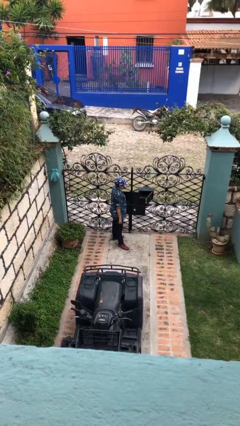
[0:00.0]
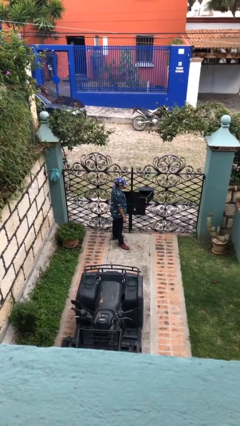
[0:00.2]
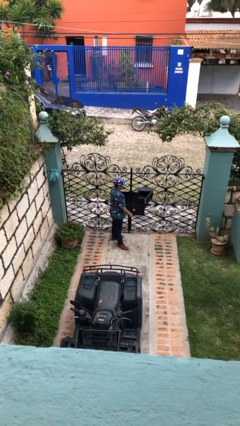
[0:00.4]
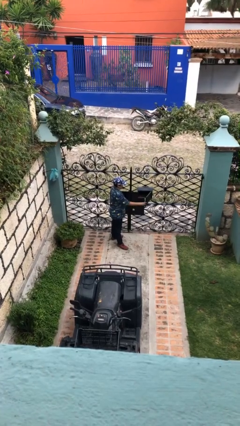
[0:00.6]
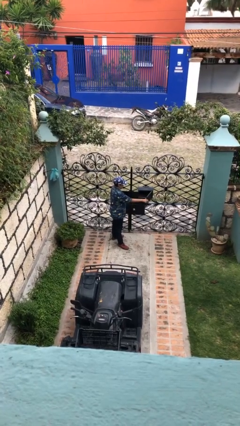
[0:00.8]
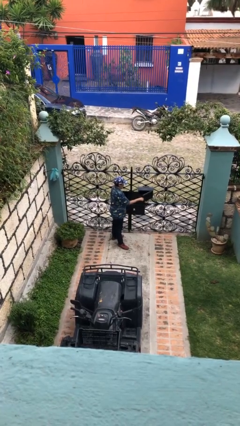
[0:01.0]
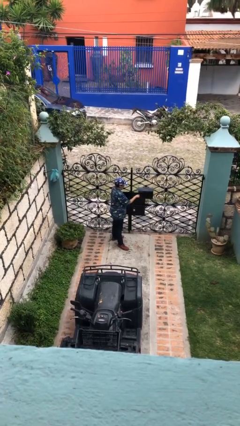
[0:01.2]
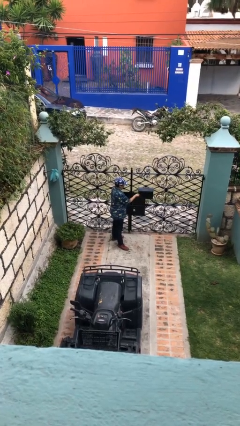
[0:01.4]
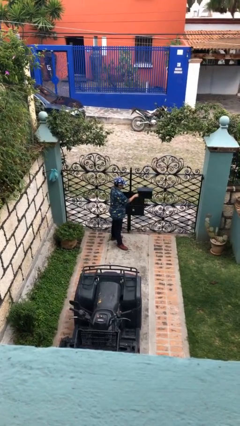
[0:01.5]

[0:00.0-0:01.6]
person closes mailbox

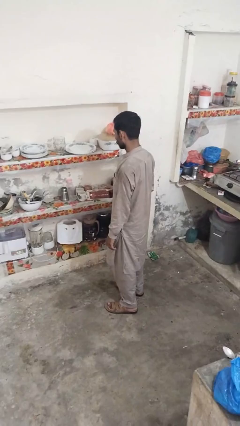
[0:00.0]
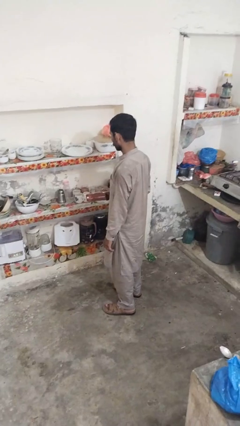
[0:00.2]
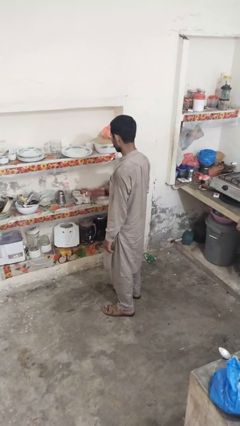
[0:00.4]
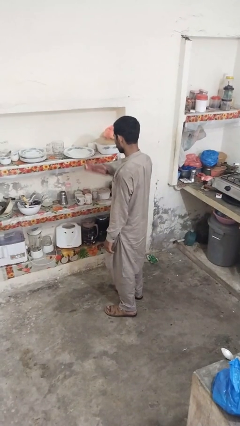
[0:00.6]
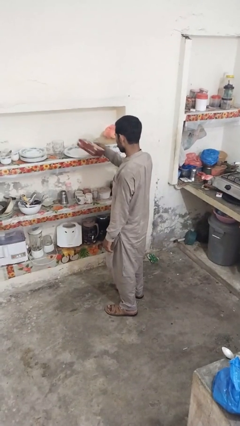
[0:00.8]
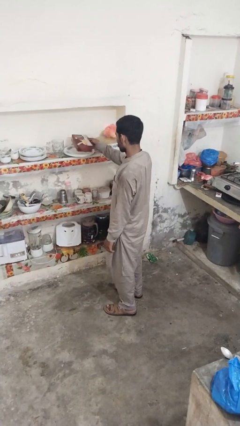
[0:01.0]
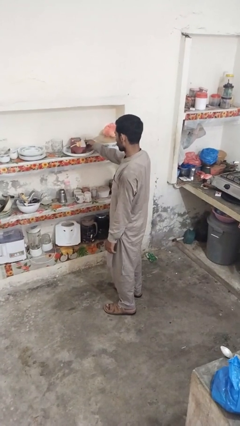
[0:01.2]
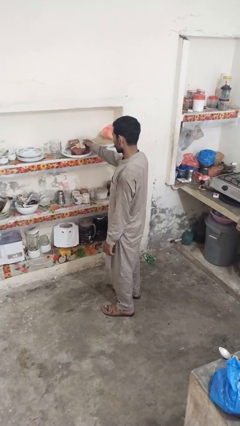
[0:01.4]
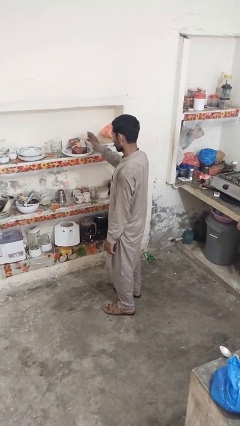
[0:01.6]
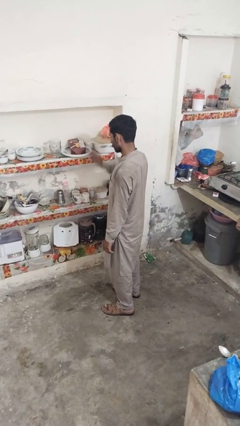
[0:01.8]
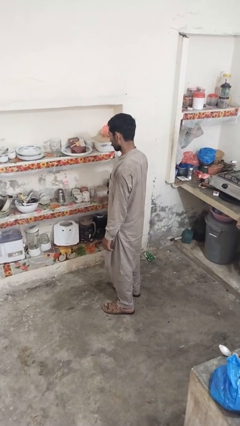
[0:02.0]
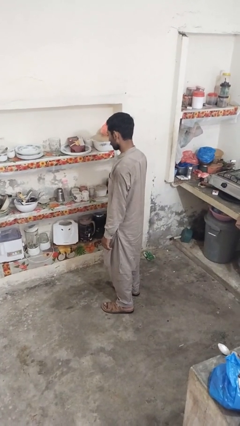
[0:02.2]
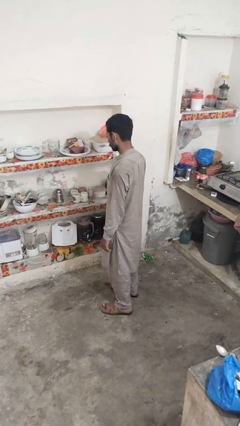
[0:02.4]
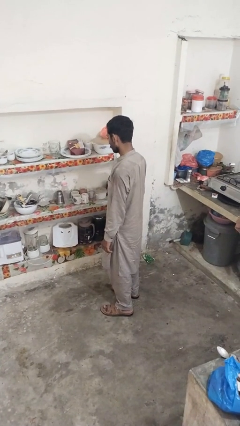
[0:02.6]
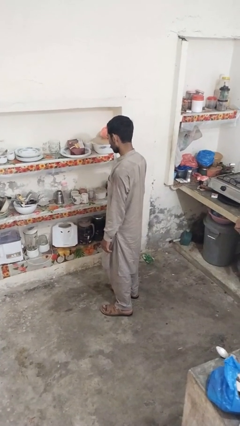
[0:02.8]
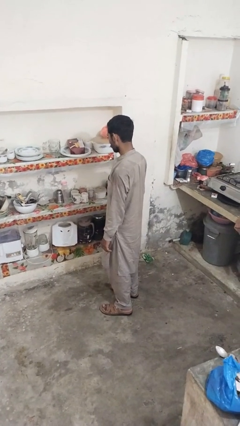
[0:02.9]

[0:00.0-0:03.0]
person puts down object into cabinet

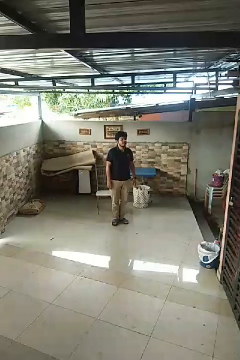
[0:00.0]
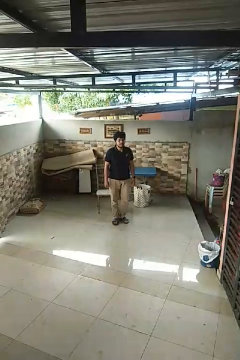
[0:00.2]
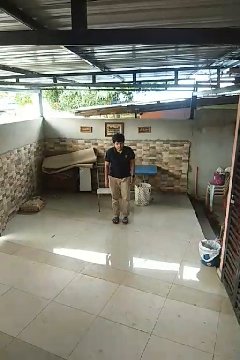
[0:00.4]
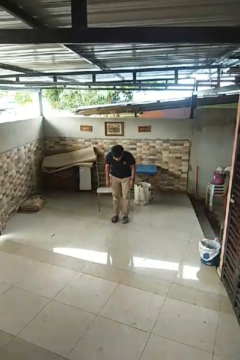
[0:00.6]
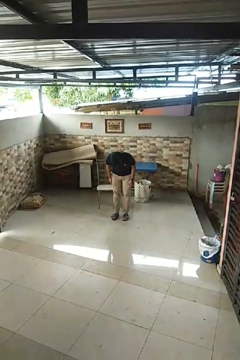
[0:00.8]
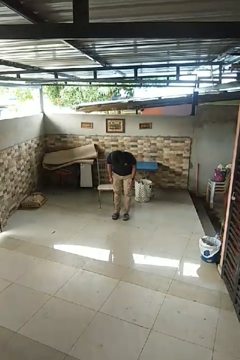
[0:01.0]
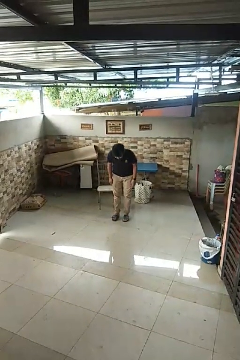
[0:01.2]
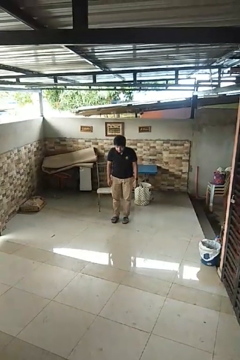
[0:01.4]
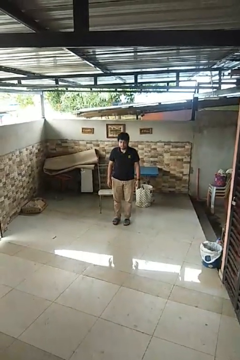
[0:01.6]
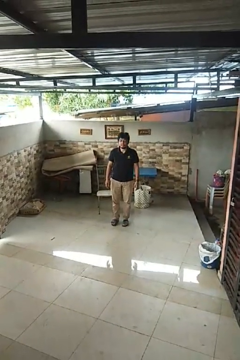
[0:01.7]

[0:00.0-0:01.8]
person bows

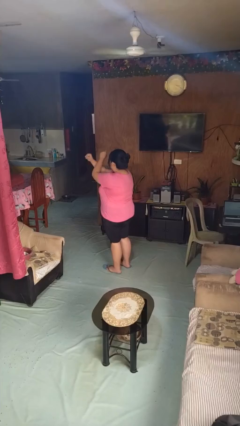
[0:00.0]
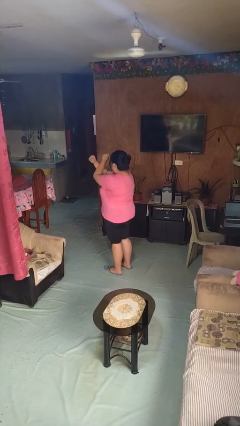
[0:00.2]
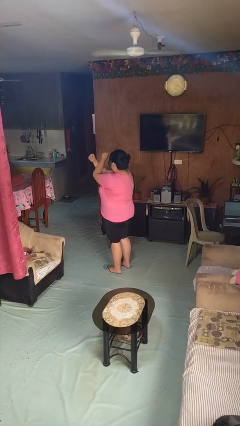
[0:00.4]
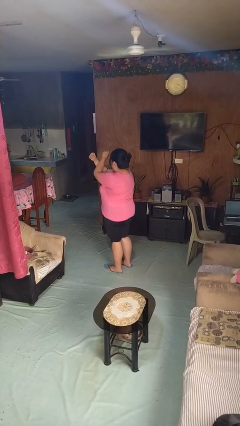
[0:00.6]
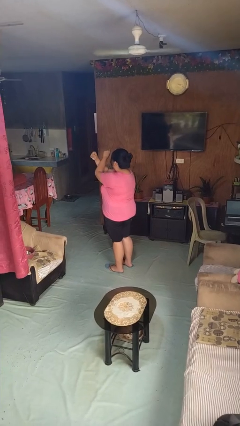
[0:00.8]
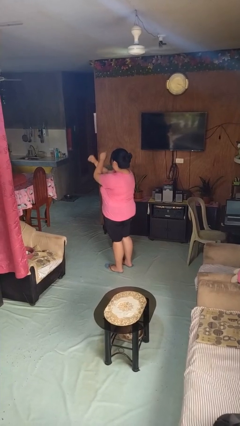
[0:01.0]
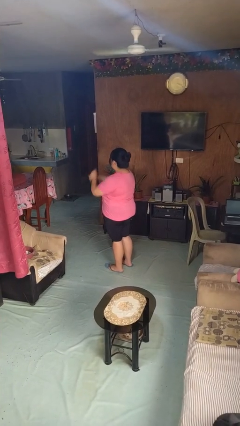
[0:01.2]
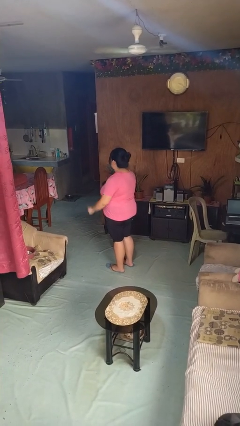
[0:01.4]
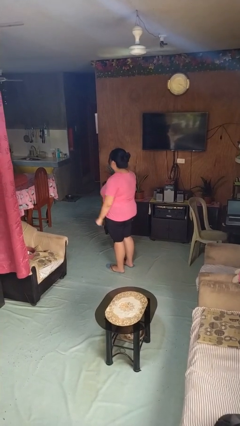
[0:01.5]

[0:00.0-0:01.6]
person gestures arms x

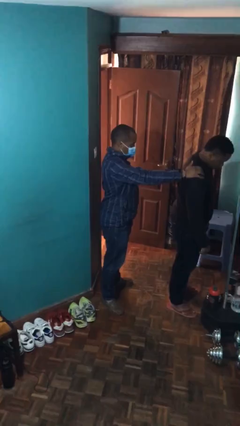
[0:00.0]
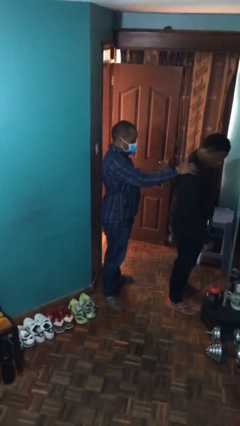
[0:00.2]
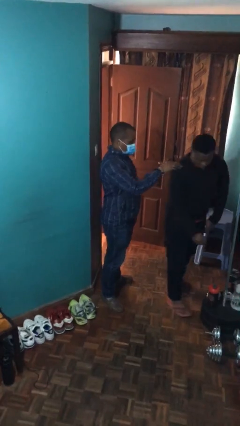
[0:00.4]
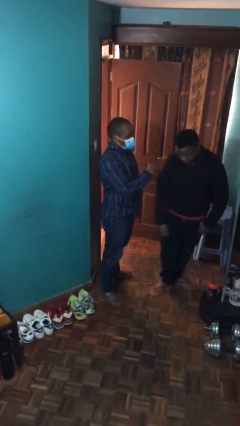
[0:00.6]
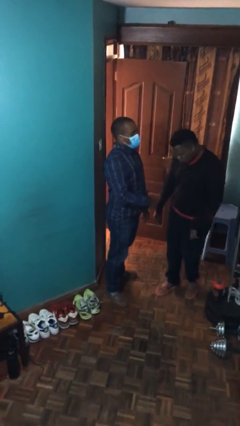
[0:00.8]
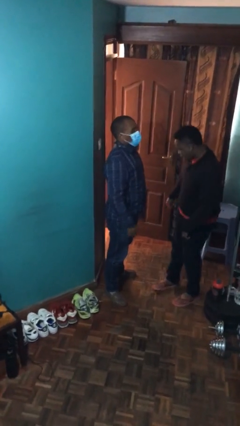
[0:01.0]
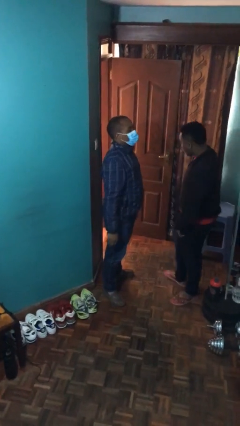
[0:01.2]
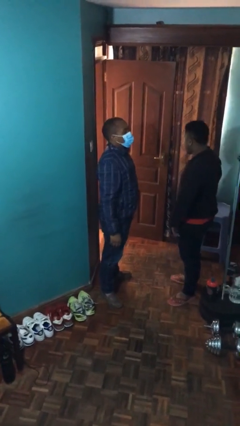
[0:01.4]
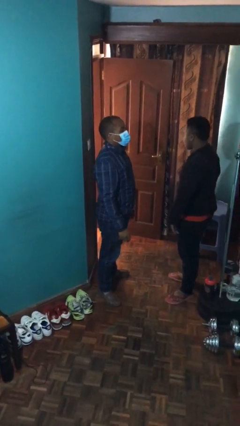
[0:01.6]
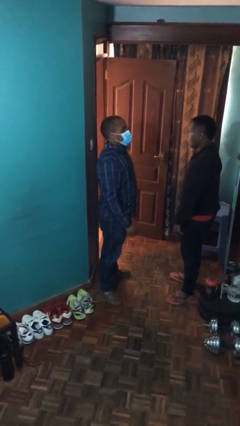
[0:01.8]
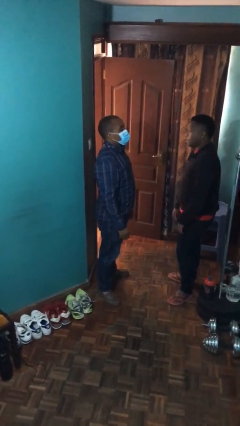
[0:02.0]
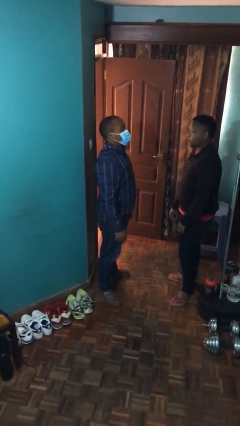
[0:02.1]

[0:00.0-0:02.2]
person spins person around

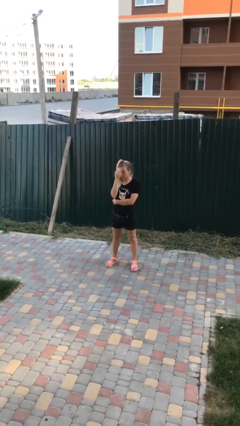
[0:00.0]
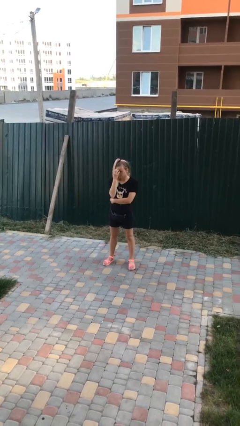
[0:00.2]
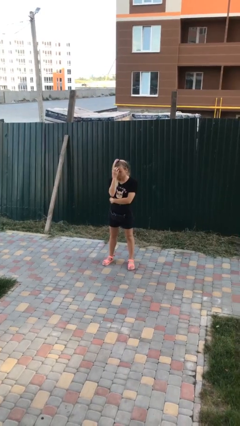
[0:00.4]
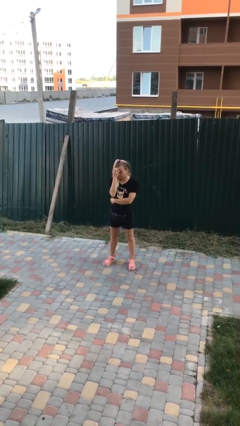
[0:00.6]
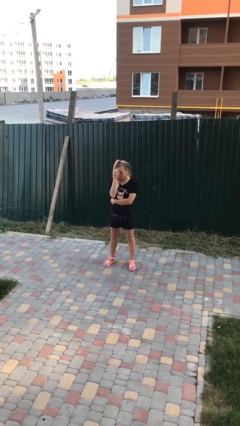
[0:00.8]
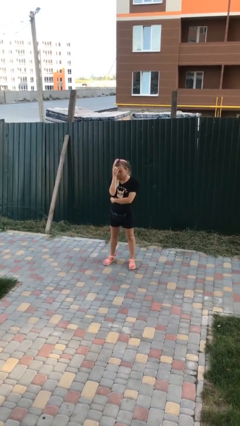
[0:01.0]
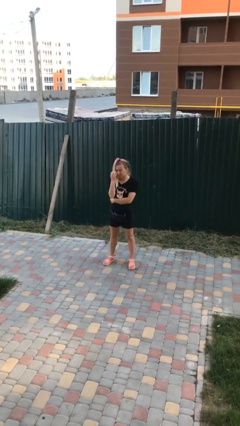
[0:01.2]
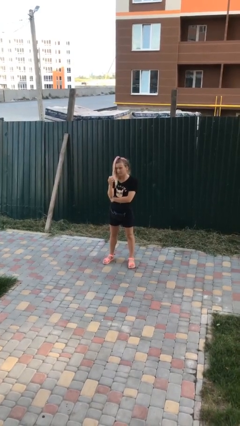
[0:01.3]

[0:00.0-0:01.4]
person scratches face

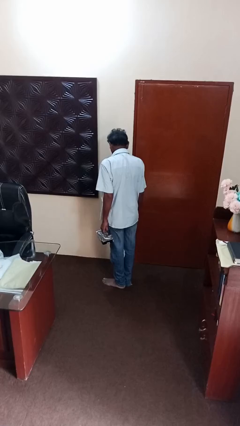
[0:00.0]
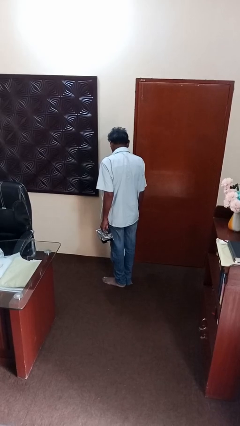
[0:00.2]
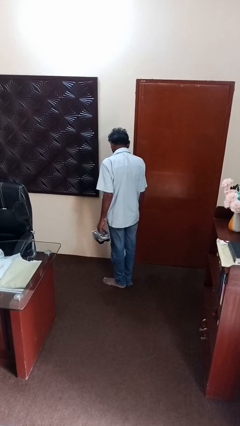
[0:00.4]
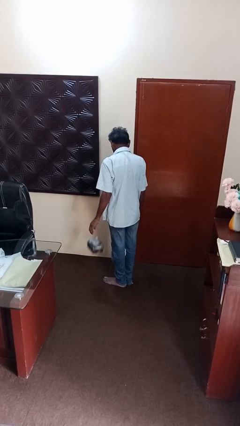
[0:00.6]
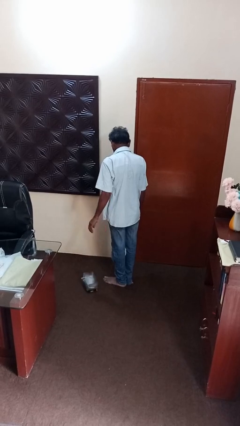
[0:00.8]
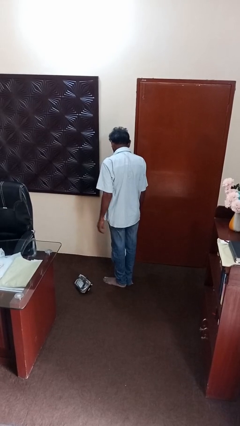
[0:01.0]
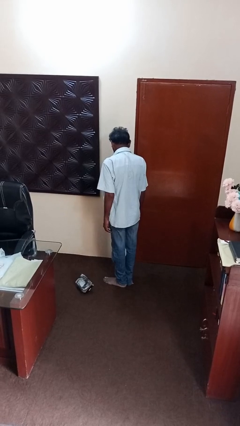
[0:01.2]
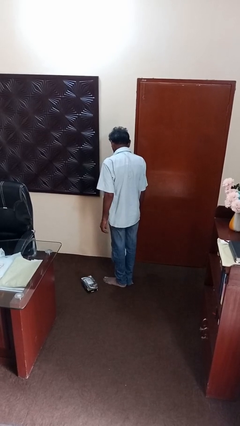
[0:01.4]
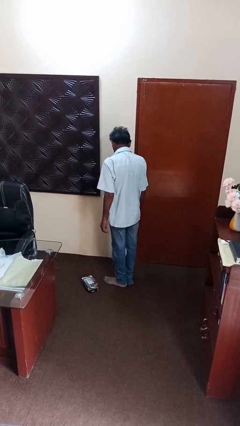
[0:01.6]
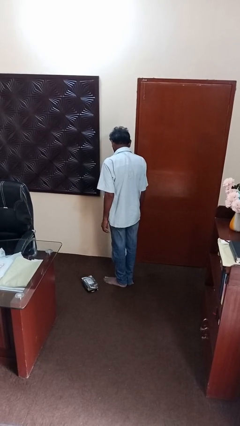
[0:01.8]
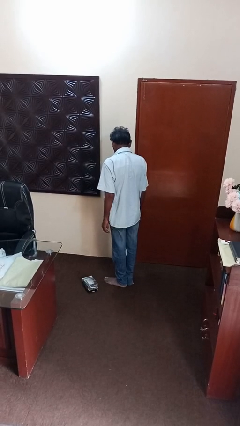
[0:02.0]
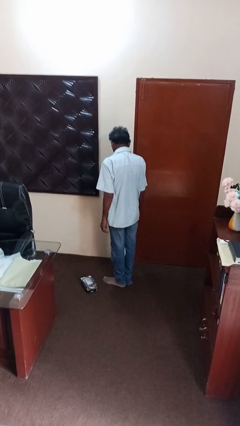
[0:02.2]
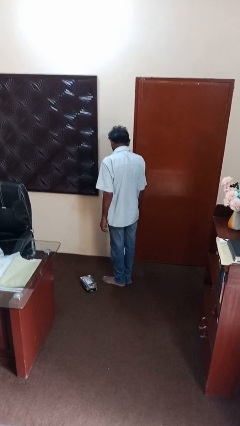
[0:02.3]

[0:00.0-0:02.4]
person throws object to ground

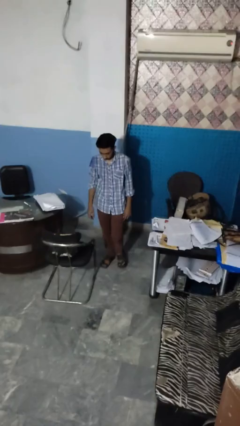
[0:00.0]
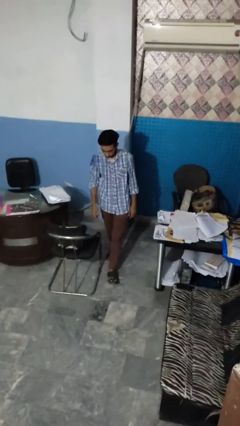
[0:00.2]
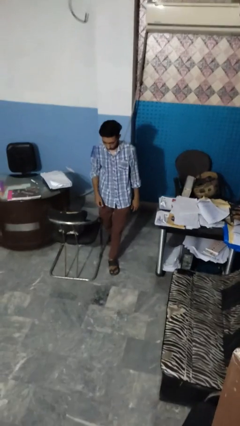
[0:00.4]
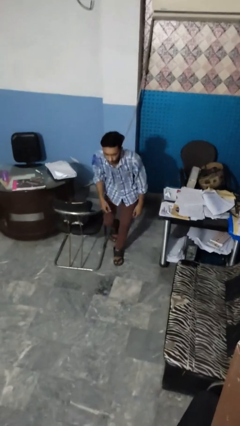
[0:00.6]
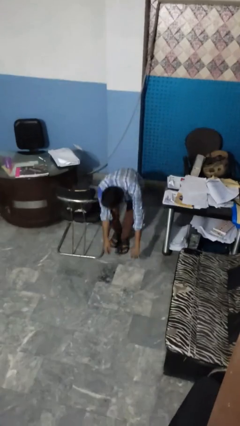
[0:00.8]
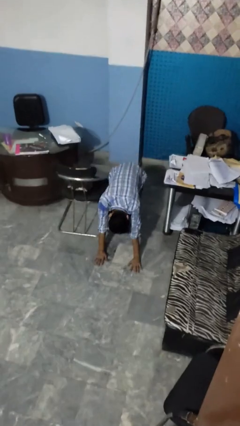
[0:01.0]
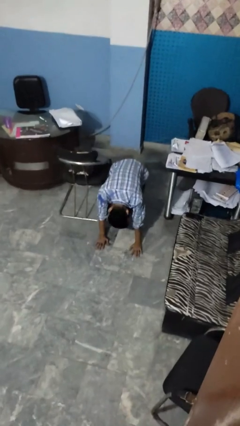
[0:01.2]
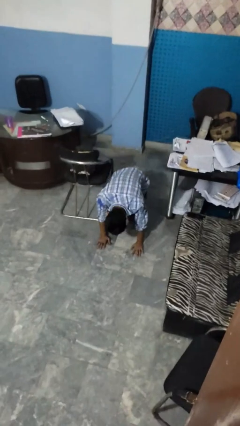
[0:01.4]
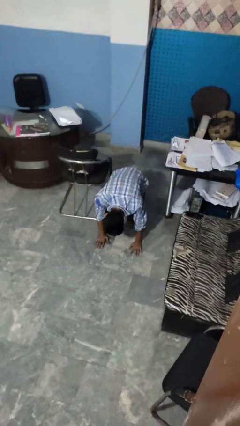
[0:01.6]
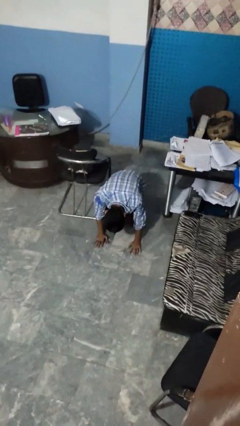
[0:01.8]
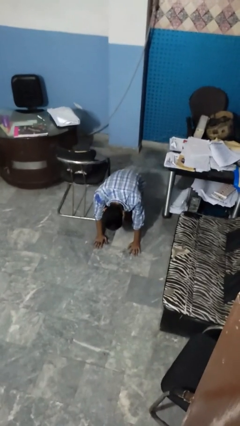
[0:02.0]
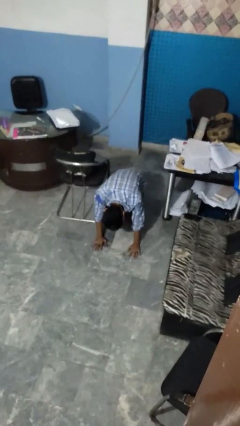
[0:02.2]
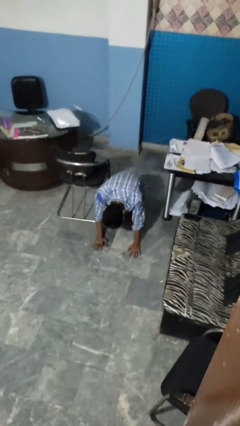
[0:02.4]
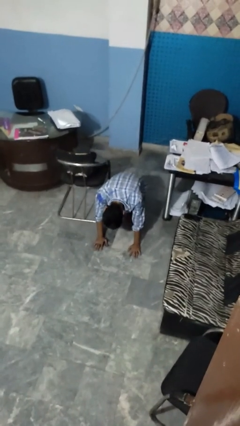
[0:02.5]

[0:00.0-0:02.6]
person trips on object on floor

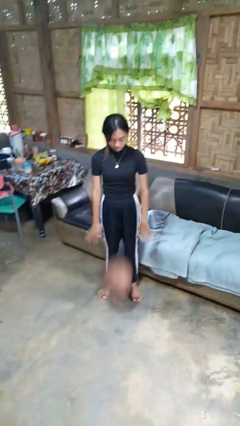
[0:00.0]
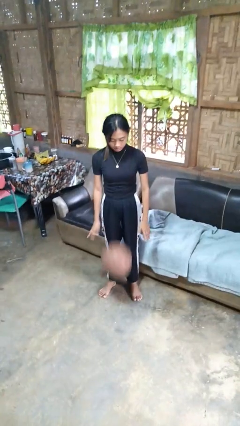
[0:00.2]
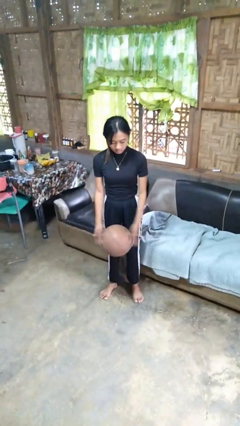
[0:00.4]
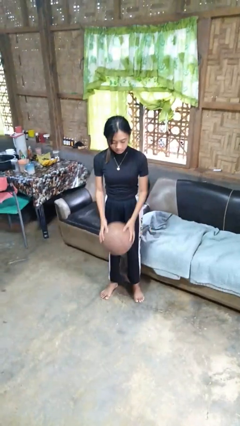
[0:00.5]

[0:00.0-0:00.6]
person bounces ball on floor
